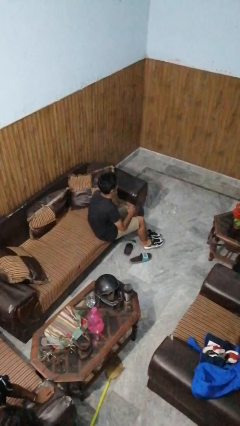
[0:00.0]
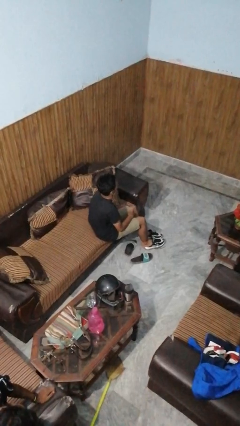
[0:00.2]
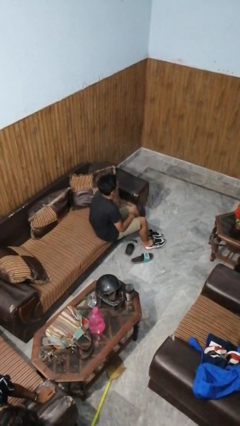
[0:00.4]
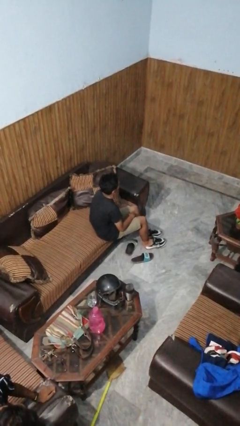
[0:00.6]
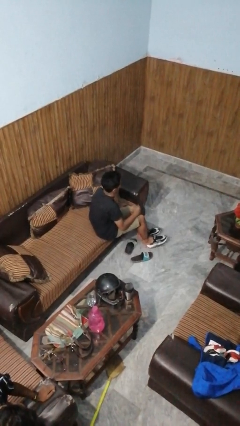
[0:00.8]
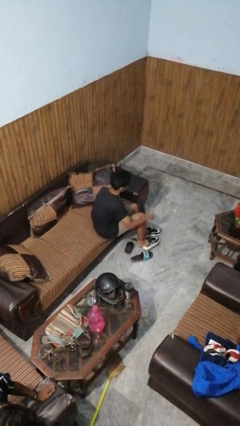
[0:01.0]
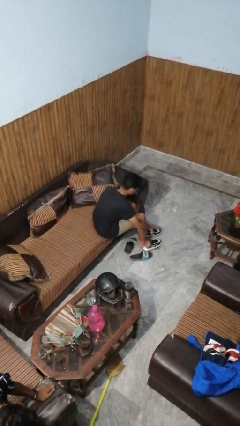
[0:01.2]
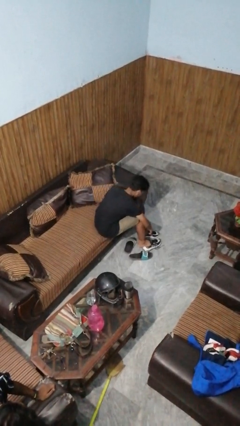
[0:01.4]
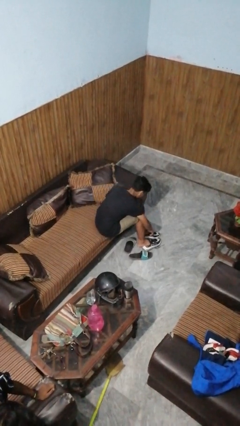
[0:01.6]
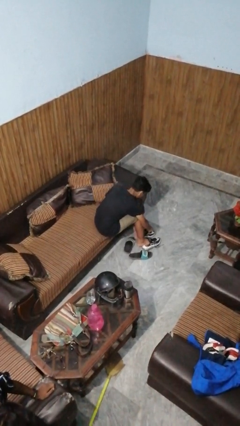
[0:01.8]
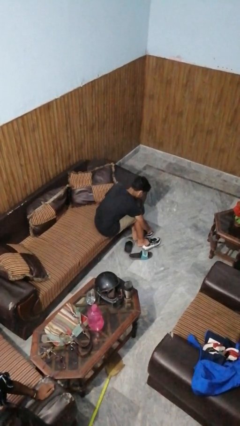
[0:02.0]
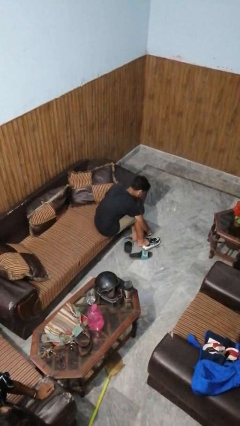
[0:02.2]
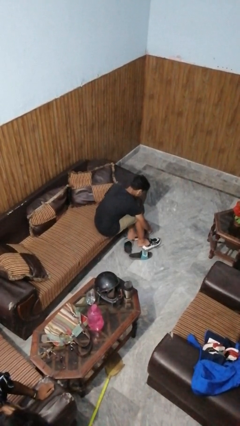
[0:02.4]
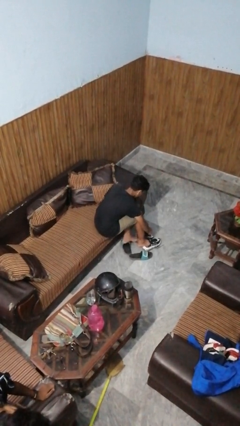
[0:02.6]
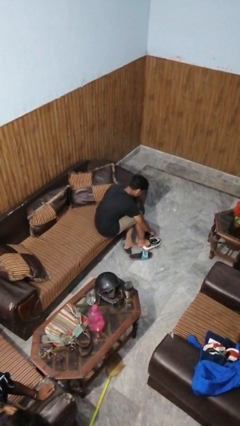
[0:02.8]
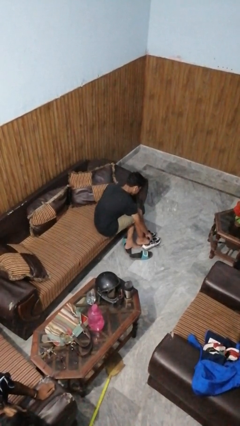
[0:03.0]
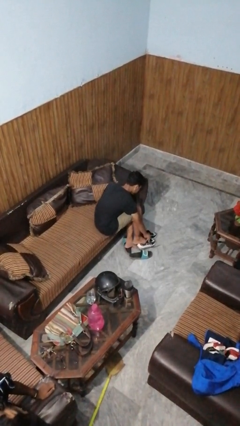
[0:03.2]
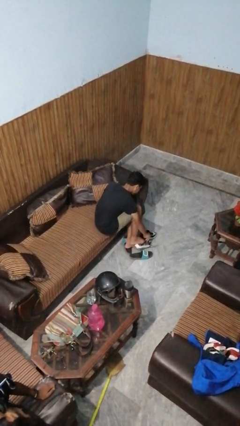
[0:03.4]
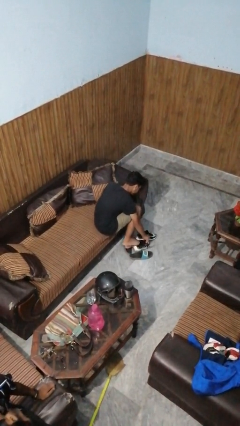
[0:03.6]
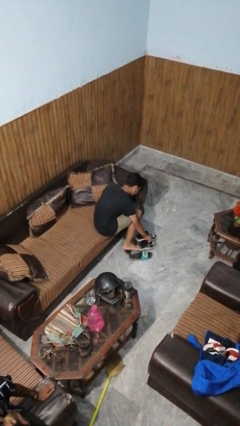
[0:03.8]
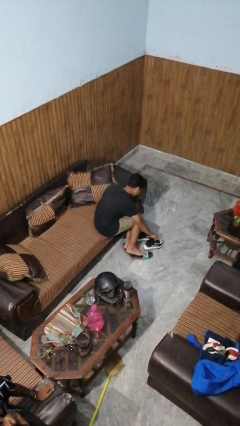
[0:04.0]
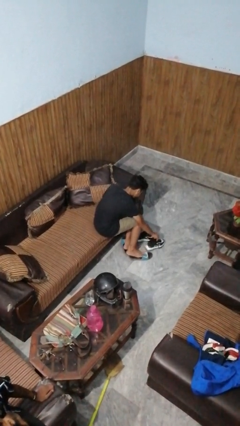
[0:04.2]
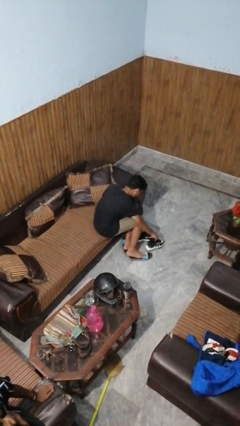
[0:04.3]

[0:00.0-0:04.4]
person takes off shoes

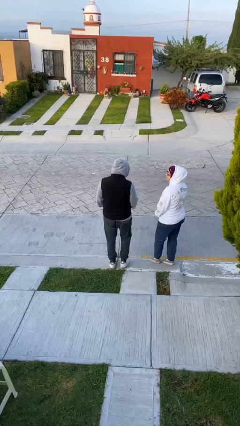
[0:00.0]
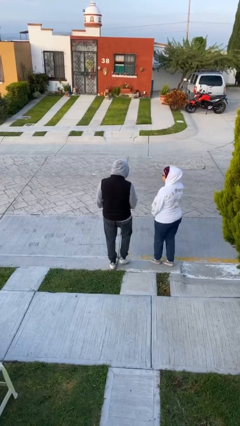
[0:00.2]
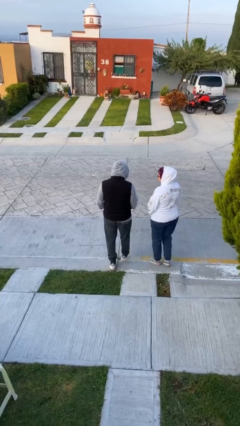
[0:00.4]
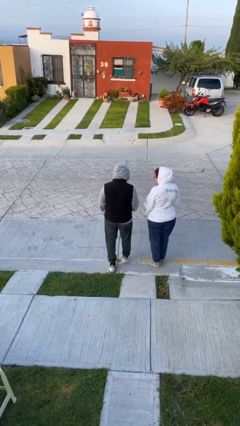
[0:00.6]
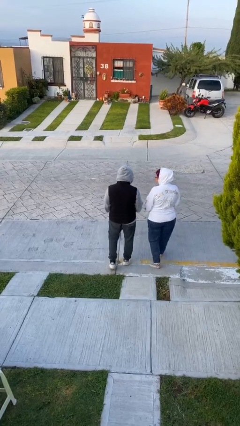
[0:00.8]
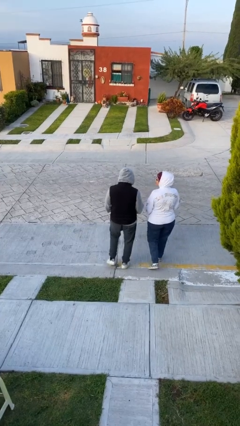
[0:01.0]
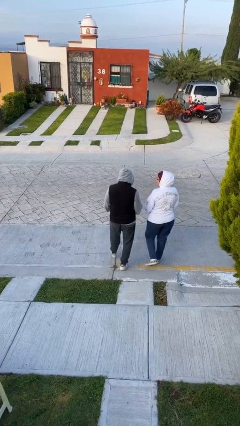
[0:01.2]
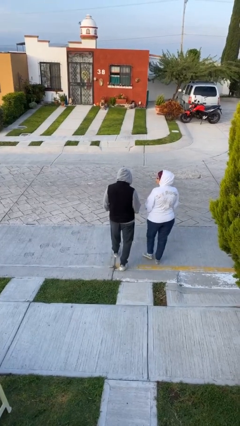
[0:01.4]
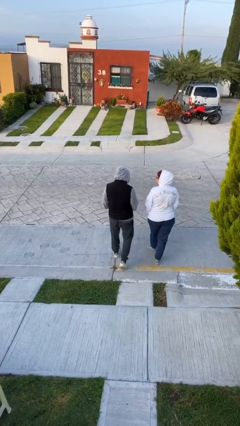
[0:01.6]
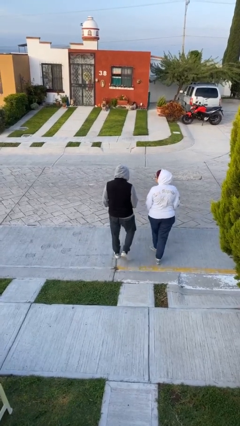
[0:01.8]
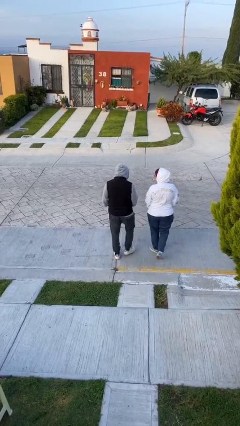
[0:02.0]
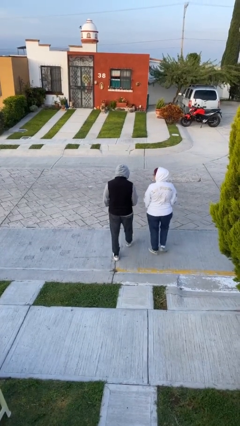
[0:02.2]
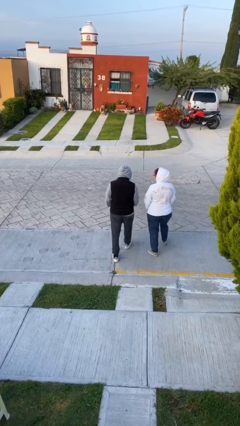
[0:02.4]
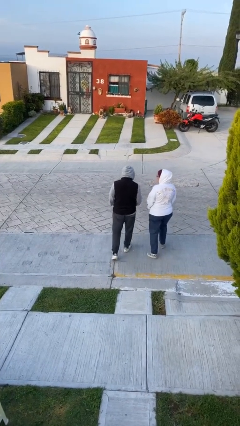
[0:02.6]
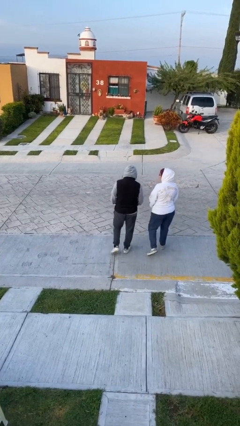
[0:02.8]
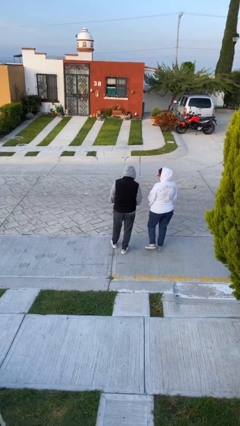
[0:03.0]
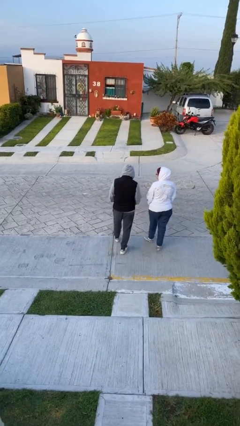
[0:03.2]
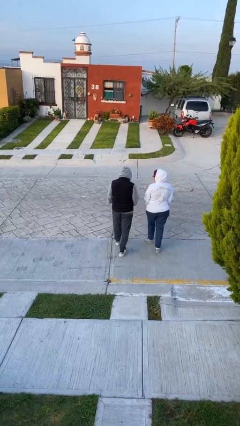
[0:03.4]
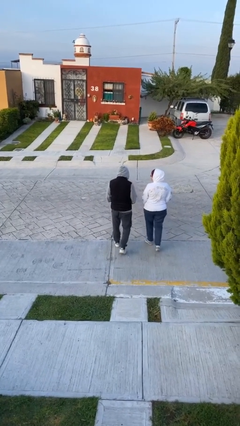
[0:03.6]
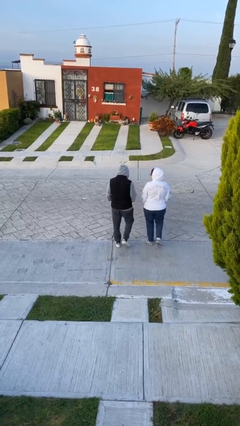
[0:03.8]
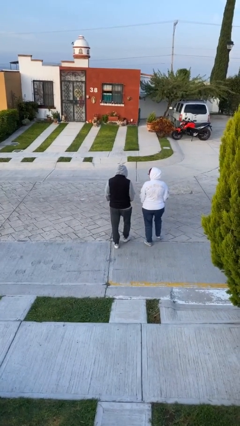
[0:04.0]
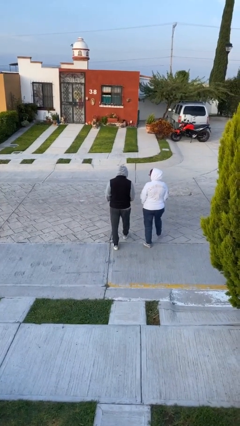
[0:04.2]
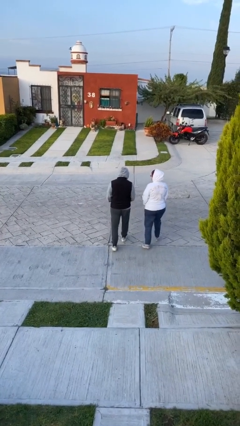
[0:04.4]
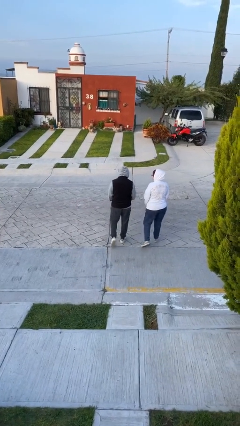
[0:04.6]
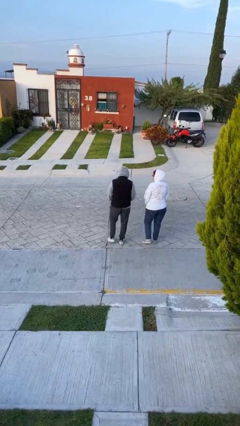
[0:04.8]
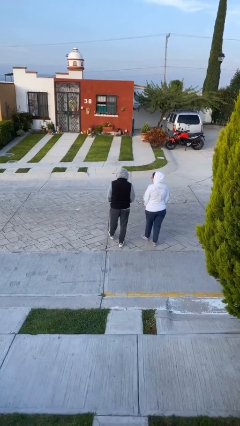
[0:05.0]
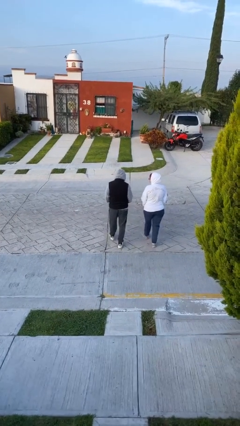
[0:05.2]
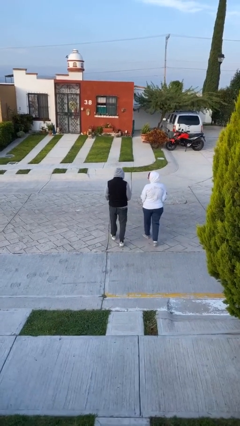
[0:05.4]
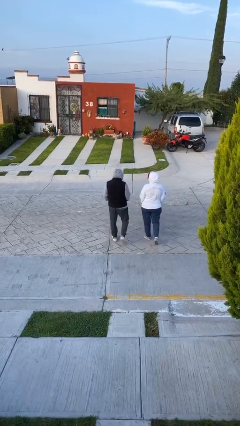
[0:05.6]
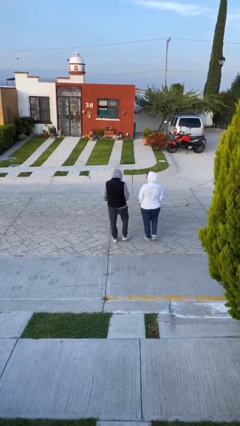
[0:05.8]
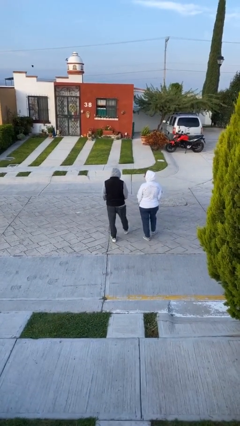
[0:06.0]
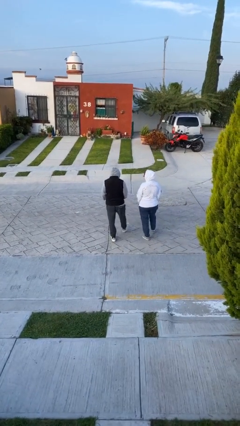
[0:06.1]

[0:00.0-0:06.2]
person talks to person

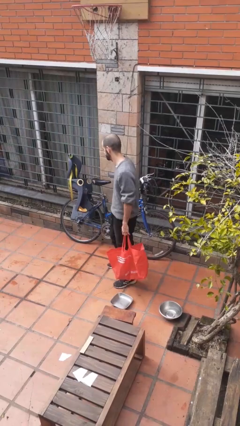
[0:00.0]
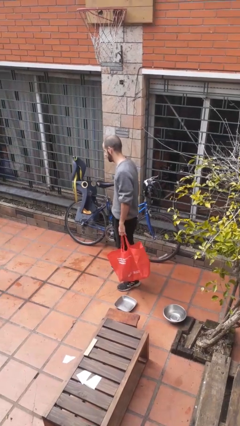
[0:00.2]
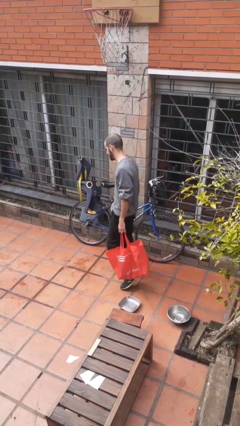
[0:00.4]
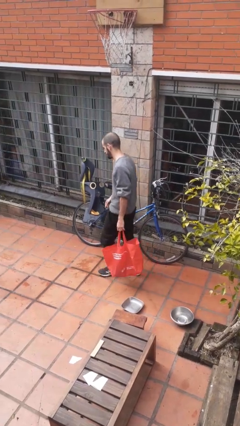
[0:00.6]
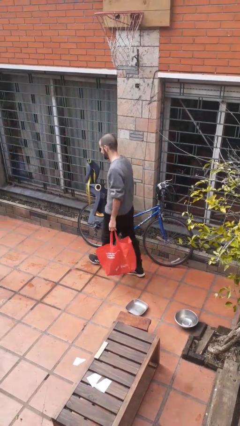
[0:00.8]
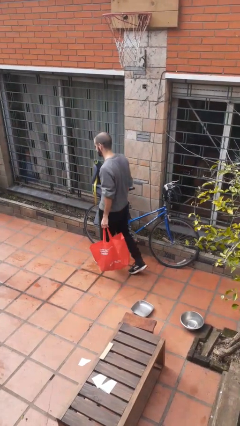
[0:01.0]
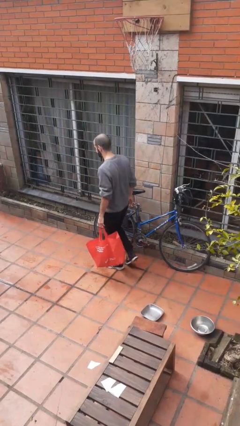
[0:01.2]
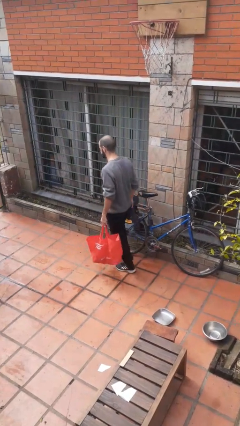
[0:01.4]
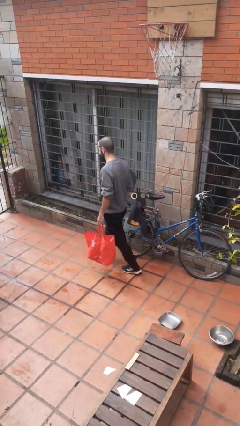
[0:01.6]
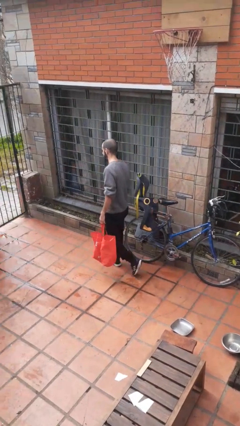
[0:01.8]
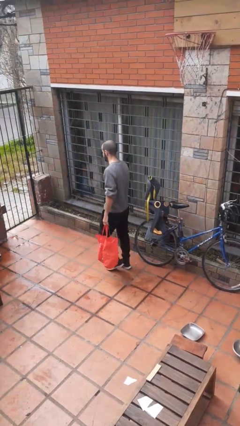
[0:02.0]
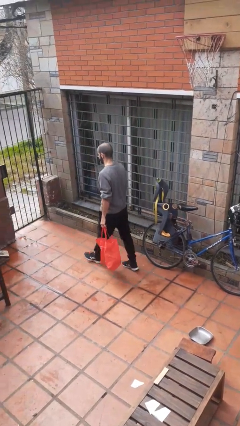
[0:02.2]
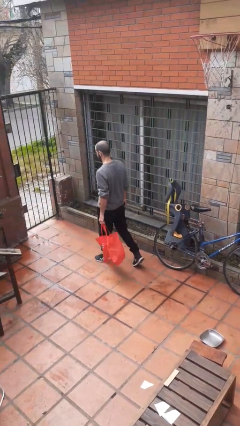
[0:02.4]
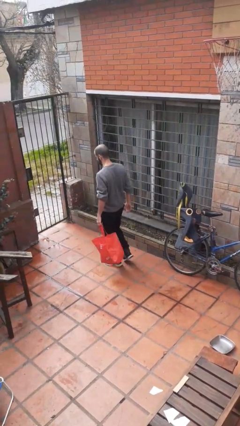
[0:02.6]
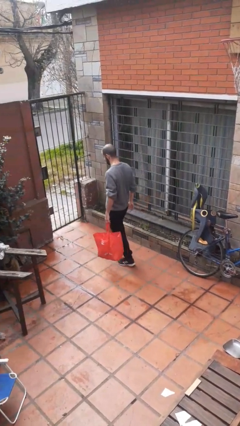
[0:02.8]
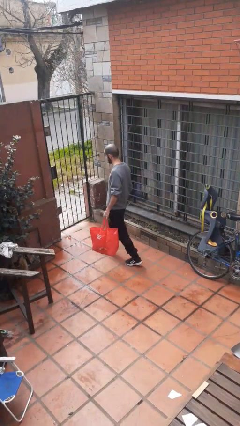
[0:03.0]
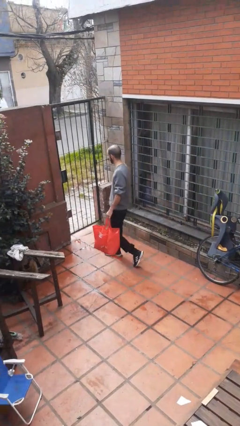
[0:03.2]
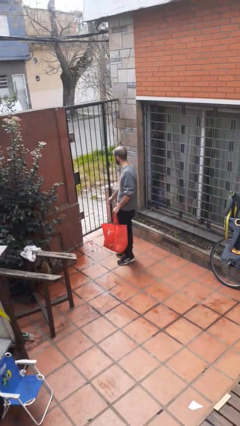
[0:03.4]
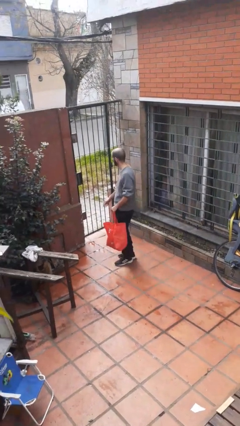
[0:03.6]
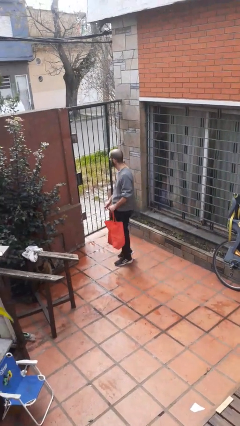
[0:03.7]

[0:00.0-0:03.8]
person carries groceries

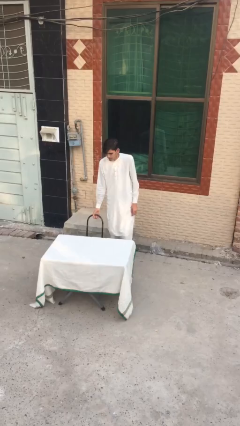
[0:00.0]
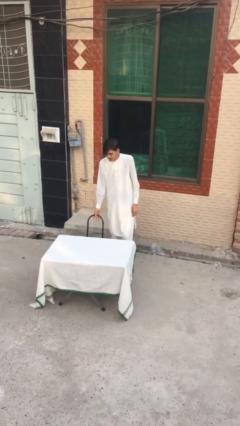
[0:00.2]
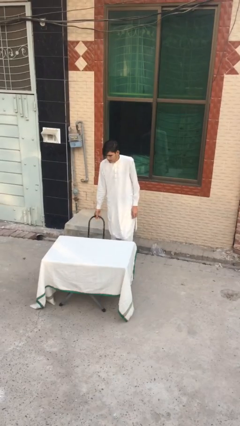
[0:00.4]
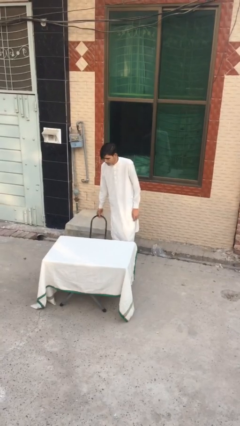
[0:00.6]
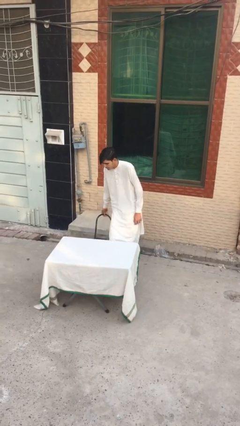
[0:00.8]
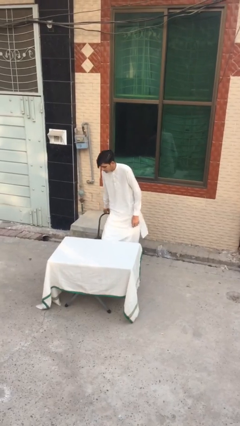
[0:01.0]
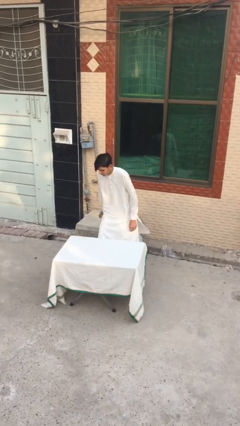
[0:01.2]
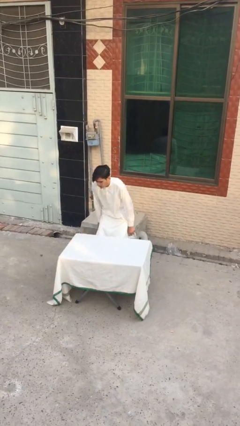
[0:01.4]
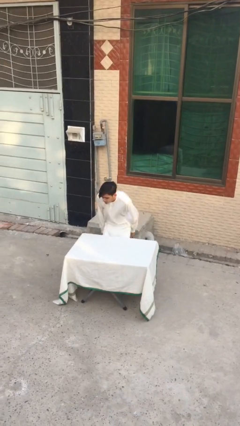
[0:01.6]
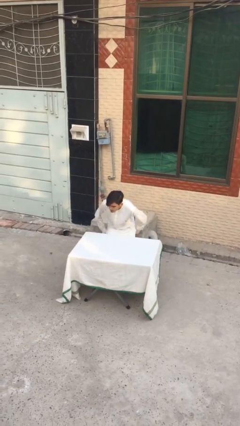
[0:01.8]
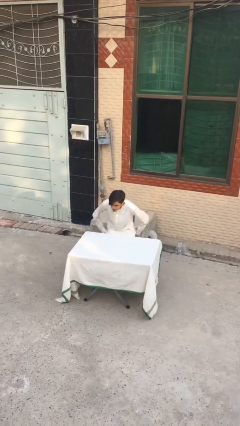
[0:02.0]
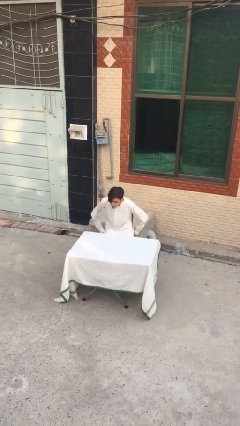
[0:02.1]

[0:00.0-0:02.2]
person sits down

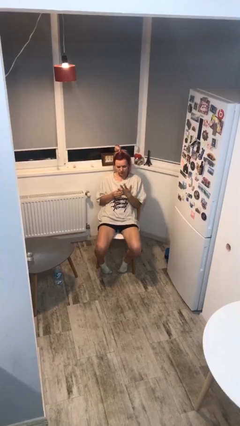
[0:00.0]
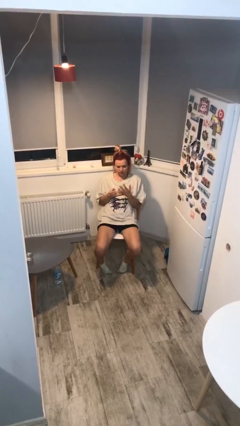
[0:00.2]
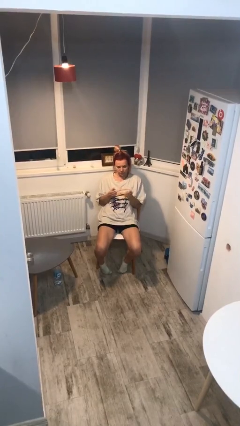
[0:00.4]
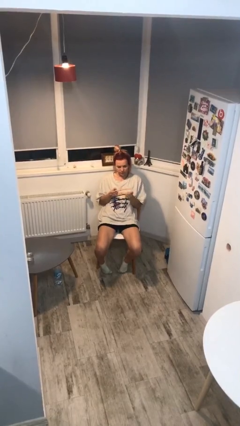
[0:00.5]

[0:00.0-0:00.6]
person takes off ring
